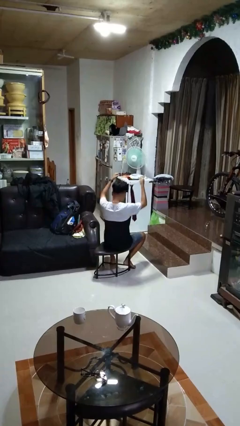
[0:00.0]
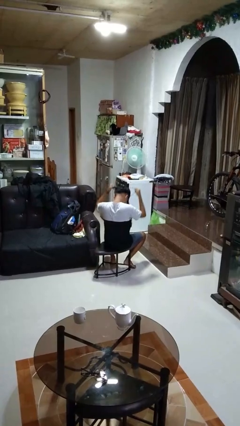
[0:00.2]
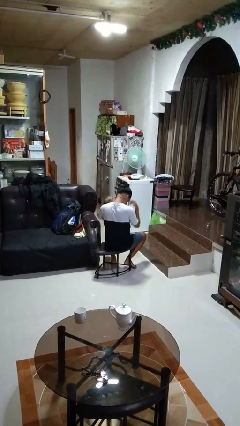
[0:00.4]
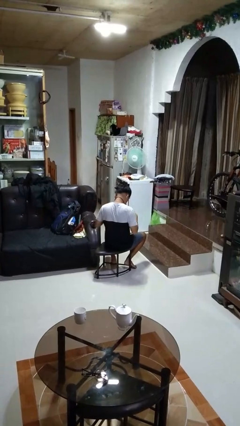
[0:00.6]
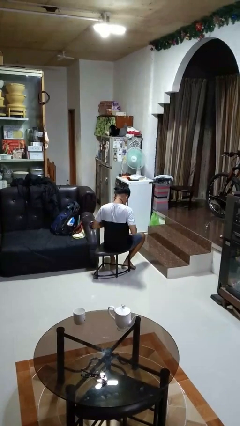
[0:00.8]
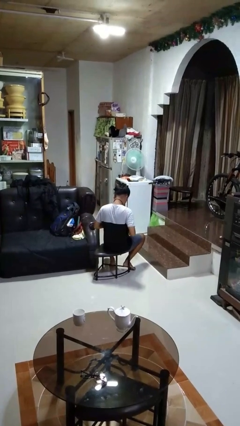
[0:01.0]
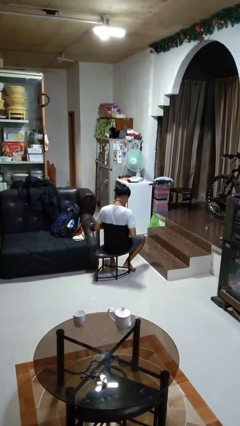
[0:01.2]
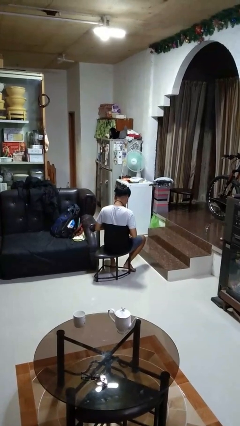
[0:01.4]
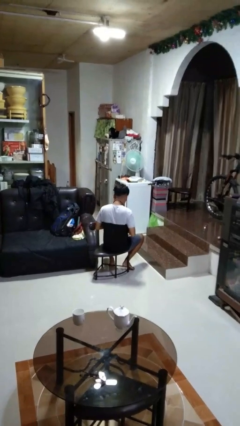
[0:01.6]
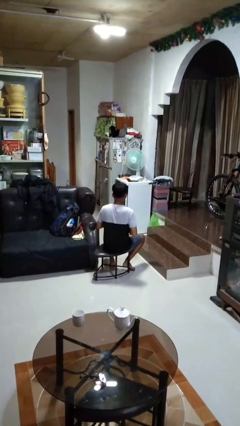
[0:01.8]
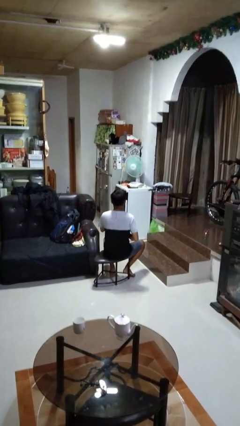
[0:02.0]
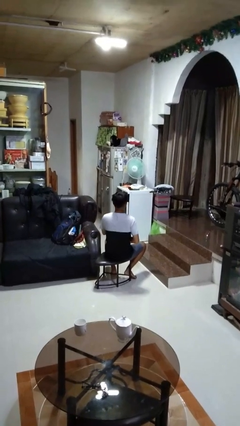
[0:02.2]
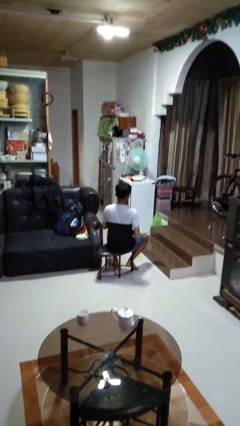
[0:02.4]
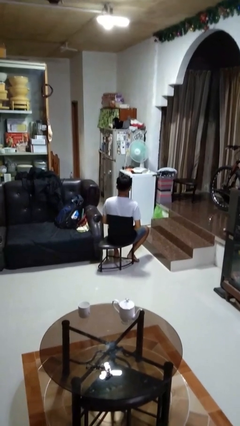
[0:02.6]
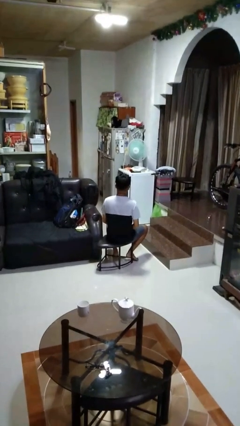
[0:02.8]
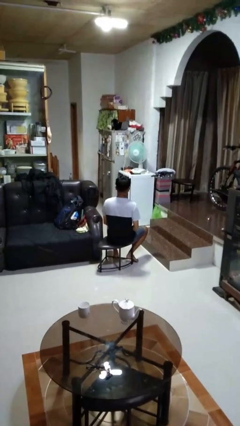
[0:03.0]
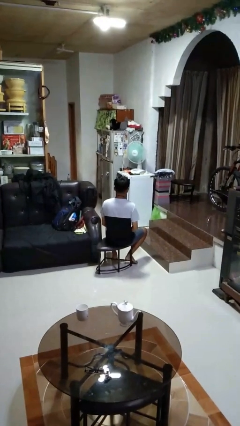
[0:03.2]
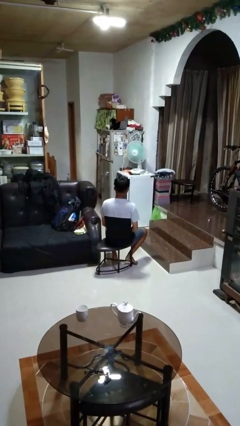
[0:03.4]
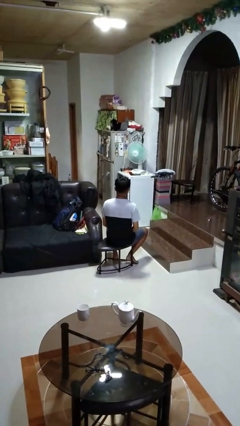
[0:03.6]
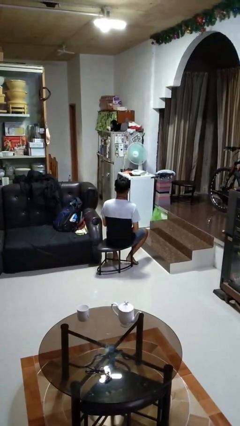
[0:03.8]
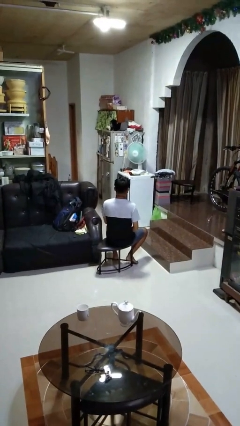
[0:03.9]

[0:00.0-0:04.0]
person puts on necktie

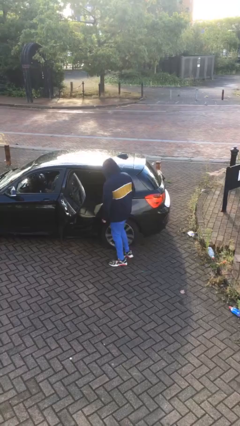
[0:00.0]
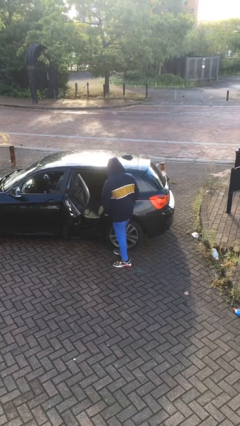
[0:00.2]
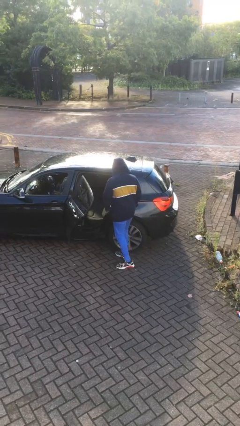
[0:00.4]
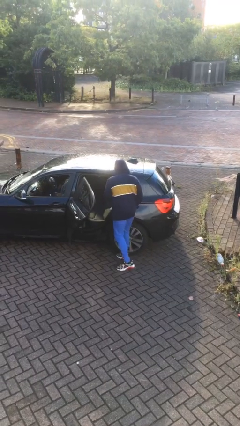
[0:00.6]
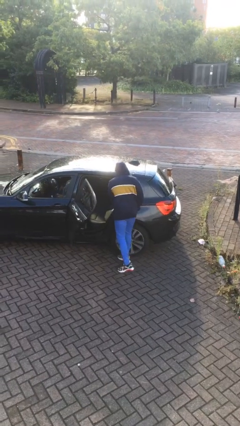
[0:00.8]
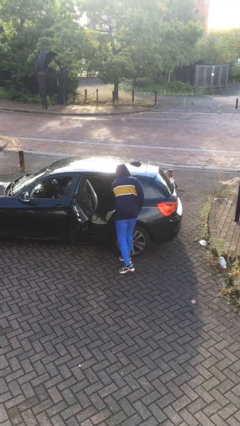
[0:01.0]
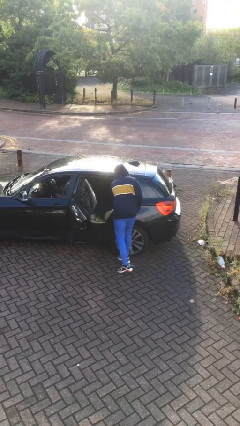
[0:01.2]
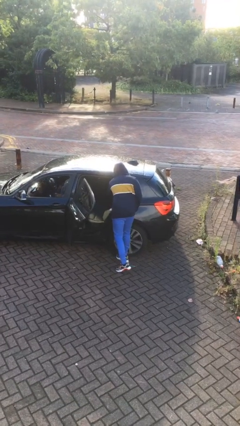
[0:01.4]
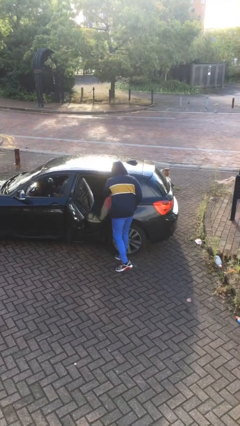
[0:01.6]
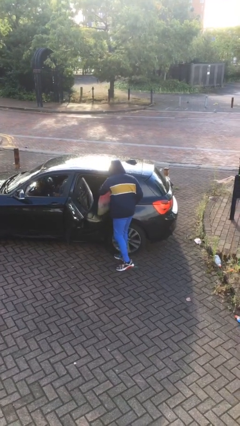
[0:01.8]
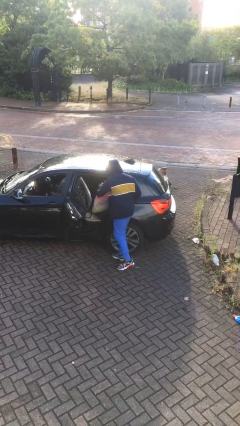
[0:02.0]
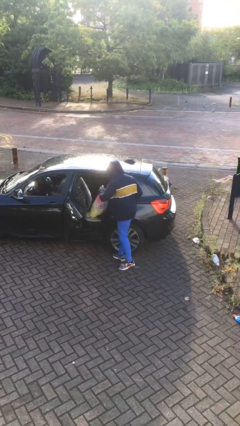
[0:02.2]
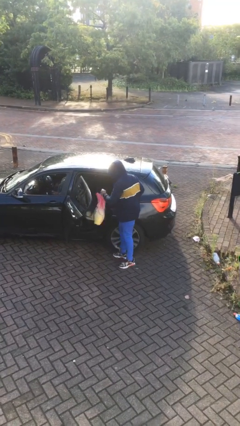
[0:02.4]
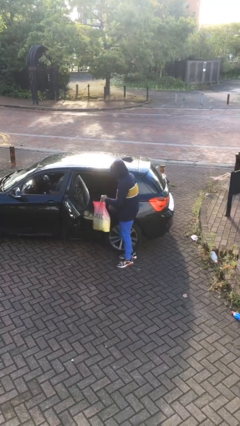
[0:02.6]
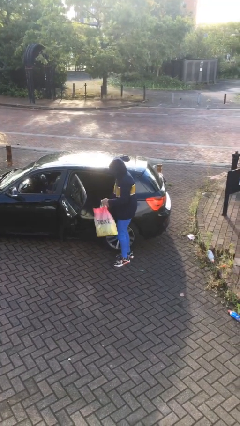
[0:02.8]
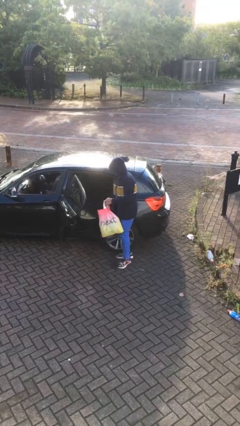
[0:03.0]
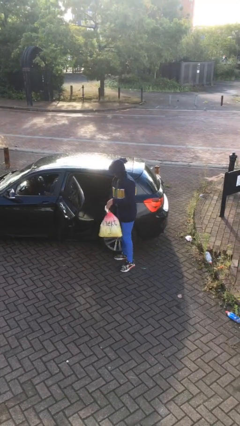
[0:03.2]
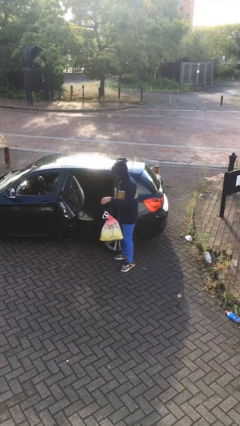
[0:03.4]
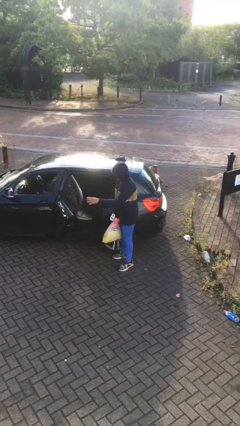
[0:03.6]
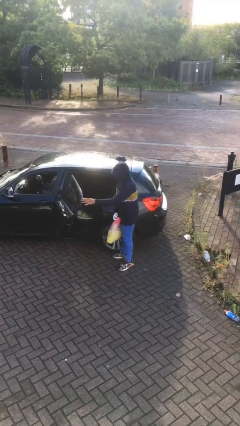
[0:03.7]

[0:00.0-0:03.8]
person unloads car

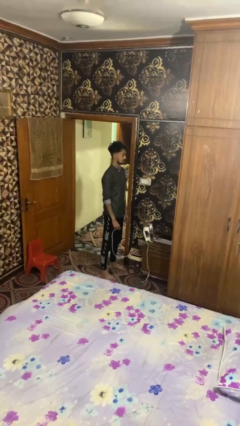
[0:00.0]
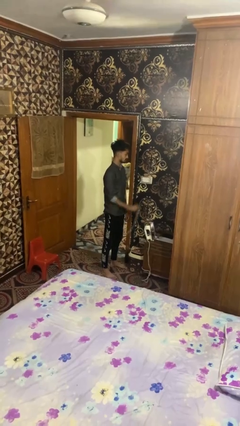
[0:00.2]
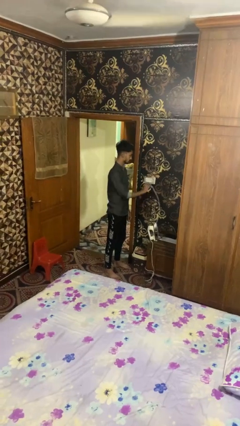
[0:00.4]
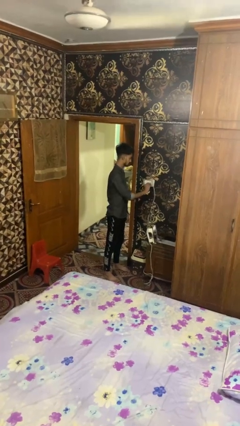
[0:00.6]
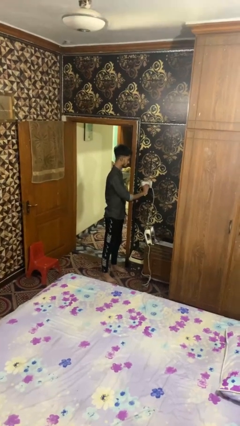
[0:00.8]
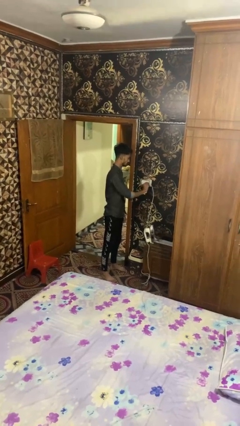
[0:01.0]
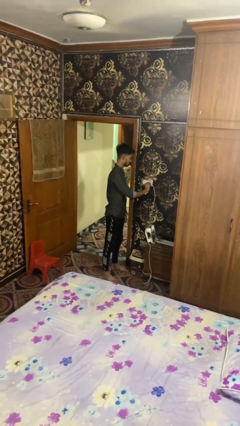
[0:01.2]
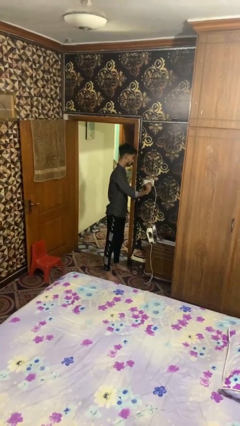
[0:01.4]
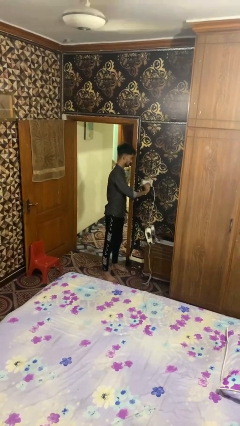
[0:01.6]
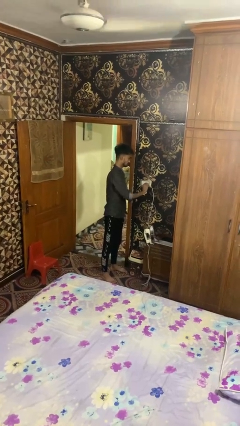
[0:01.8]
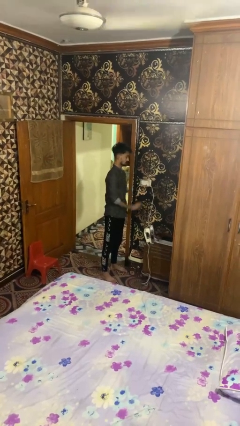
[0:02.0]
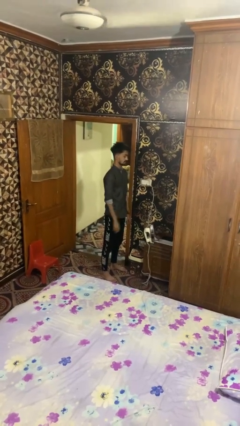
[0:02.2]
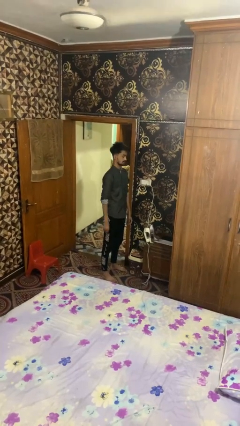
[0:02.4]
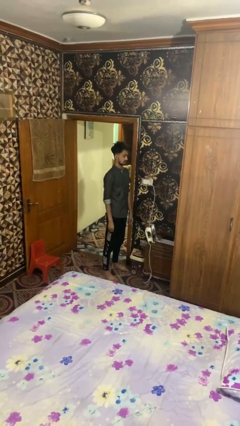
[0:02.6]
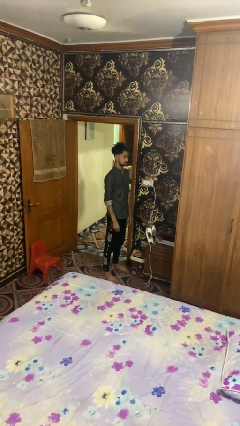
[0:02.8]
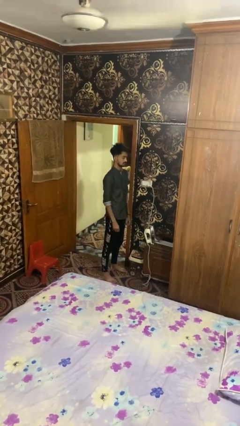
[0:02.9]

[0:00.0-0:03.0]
person plugs into electrical socket

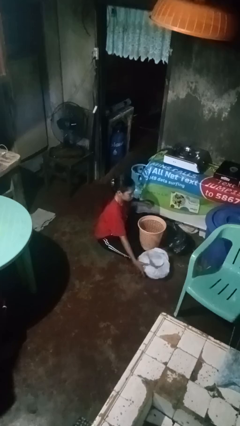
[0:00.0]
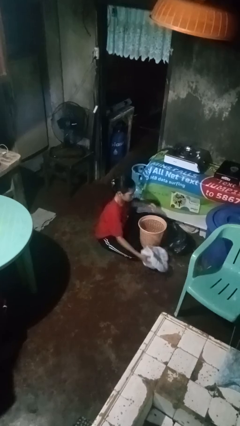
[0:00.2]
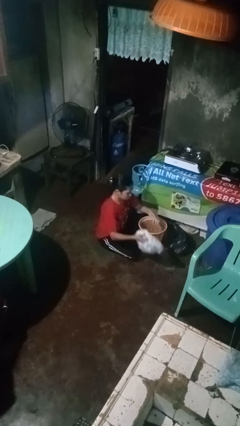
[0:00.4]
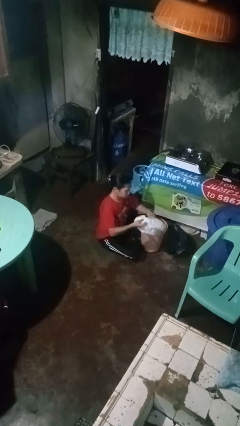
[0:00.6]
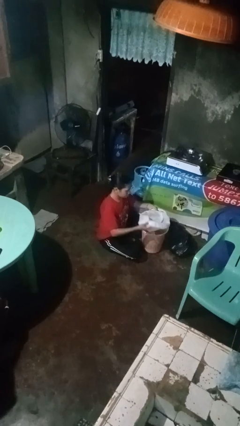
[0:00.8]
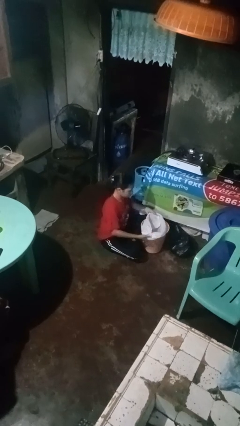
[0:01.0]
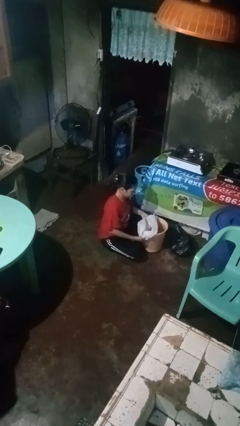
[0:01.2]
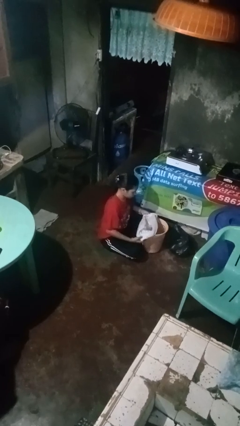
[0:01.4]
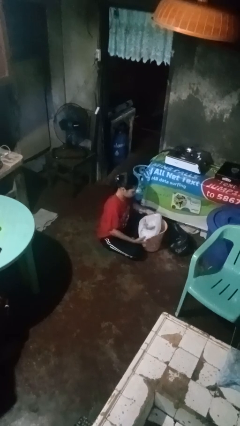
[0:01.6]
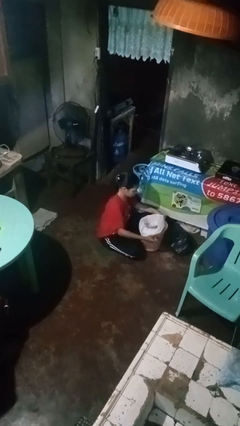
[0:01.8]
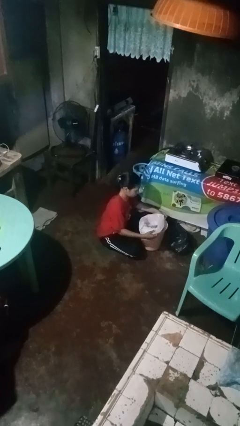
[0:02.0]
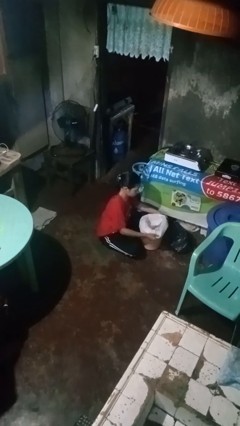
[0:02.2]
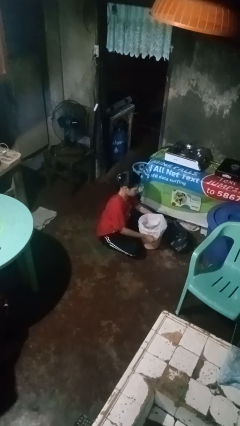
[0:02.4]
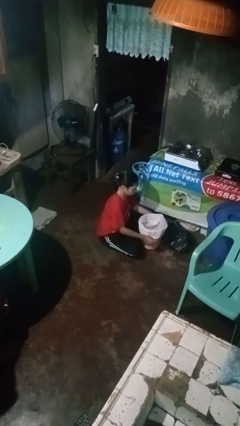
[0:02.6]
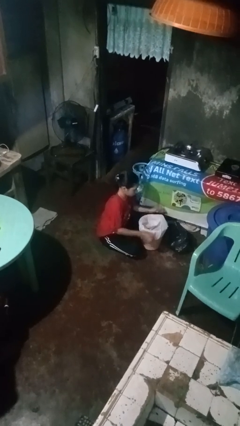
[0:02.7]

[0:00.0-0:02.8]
person inserts trashbag into trashcan

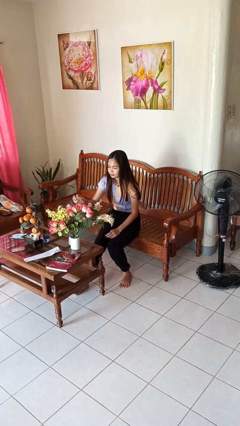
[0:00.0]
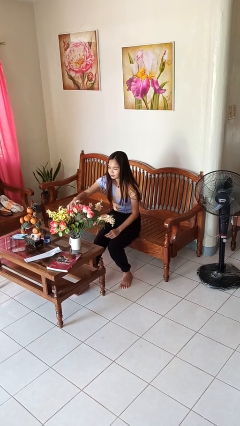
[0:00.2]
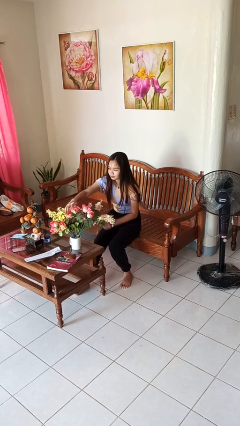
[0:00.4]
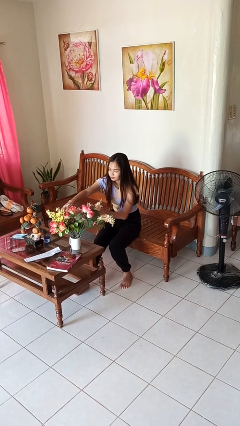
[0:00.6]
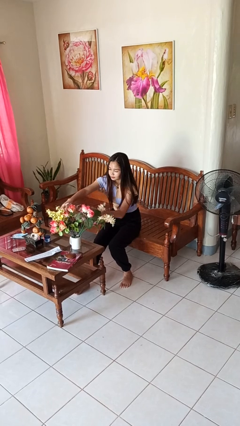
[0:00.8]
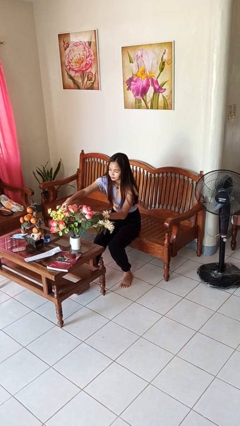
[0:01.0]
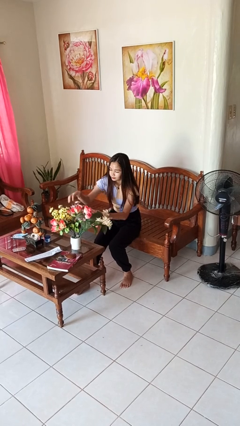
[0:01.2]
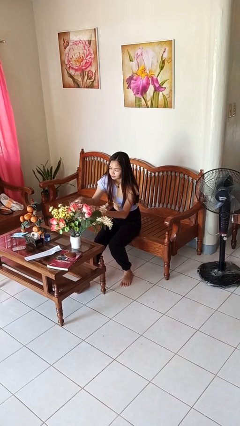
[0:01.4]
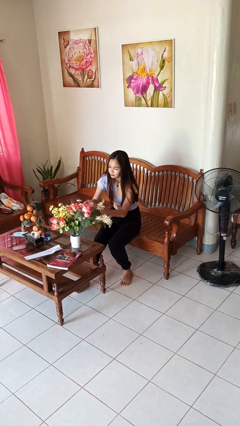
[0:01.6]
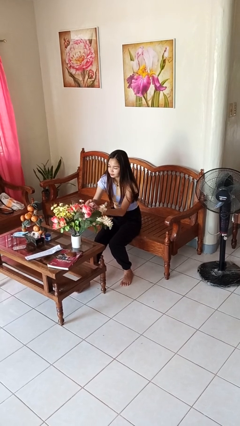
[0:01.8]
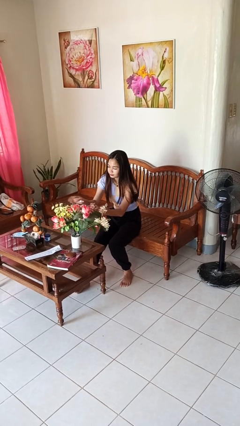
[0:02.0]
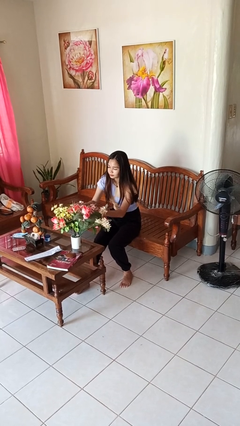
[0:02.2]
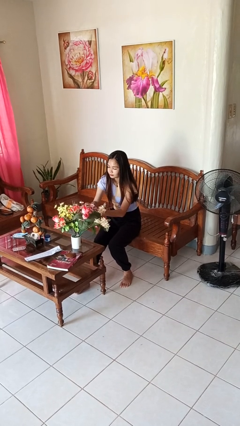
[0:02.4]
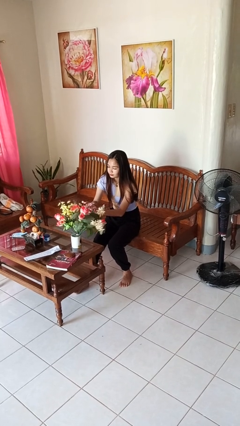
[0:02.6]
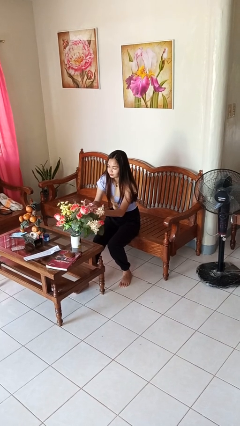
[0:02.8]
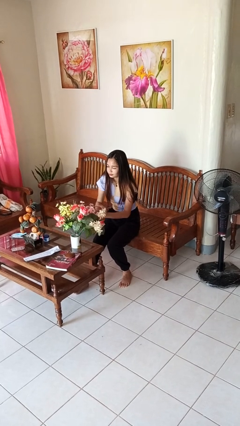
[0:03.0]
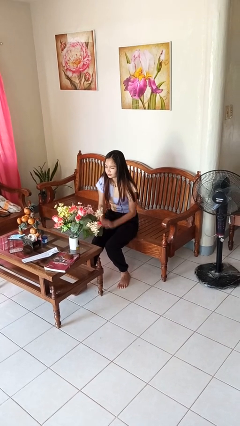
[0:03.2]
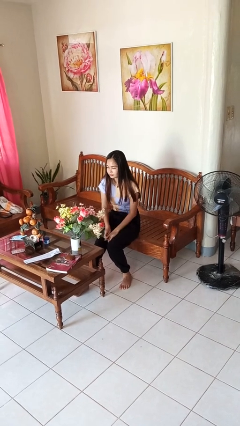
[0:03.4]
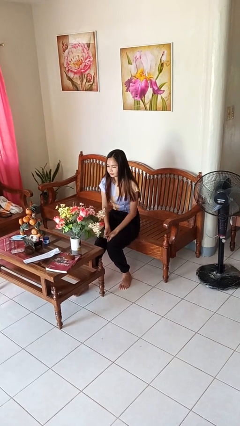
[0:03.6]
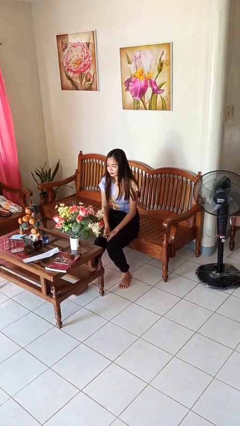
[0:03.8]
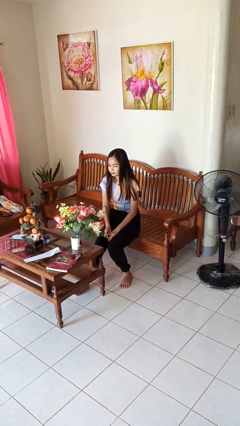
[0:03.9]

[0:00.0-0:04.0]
person arranges flowers in vase
